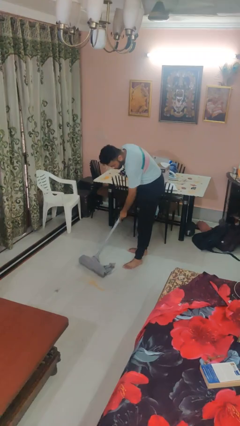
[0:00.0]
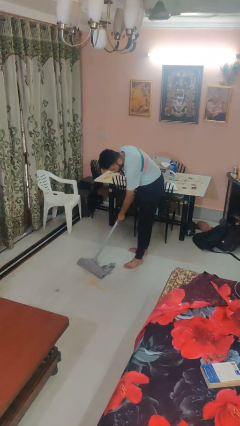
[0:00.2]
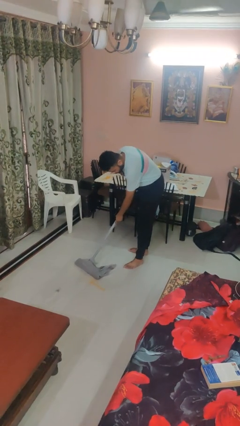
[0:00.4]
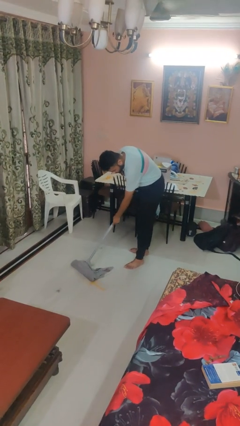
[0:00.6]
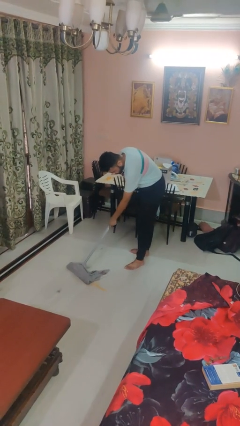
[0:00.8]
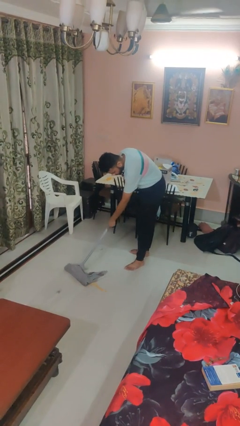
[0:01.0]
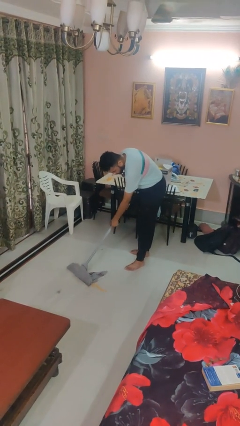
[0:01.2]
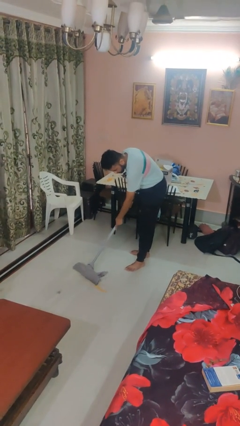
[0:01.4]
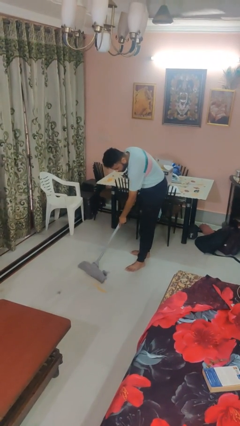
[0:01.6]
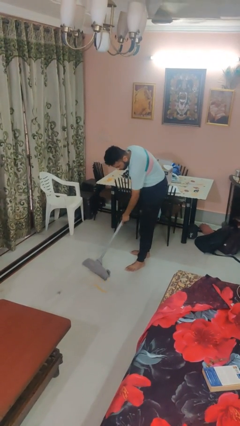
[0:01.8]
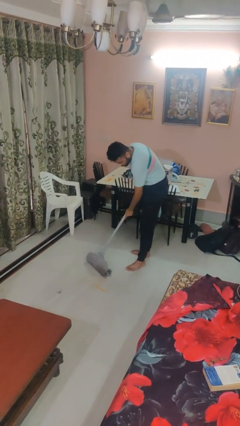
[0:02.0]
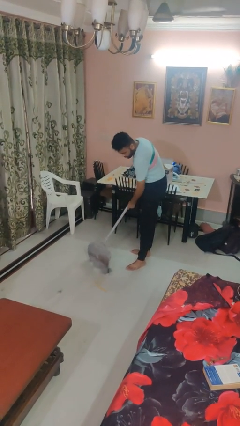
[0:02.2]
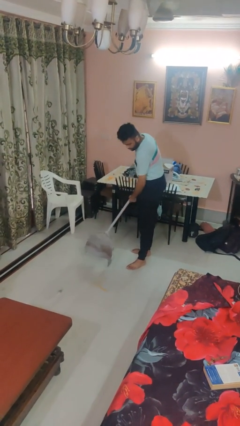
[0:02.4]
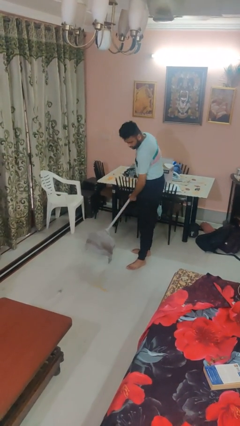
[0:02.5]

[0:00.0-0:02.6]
person mops

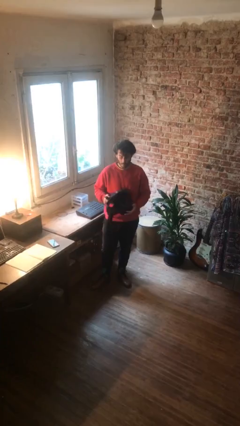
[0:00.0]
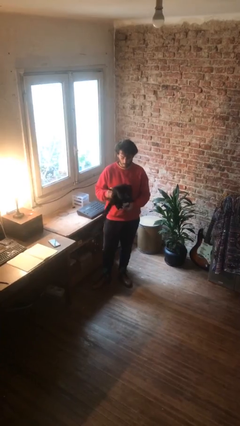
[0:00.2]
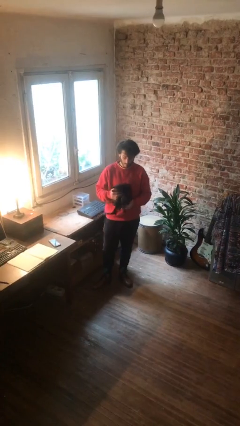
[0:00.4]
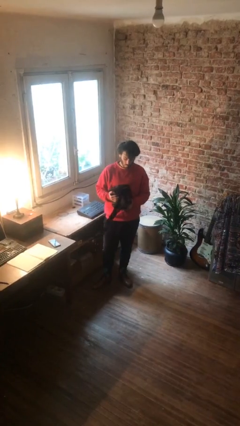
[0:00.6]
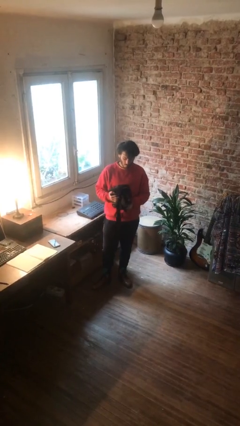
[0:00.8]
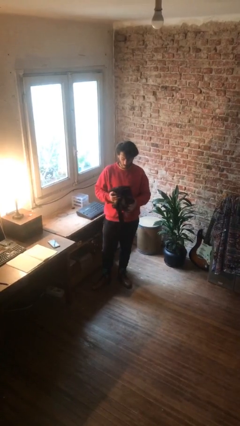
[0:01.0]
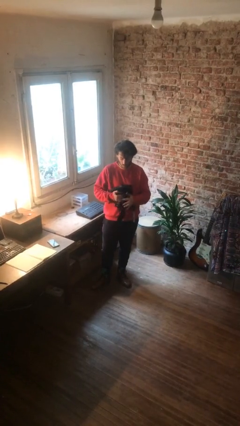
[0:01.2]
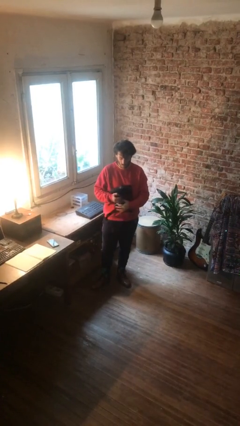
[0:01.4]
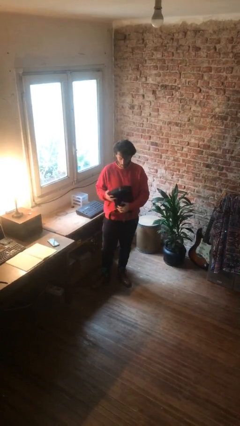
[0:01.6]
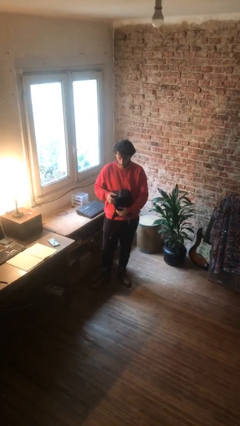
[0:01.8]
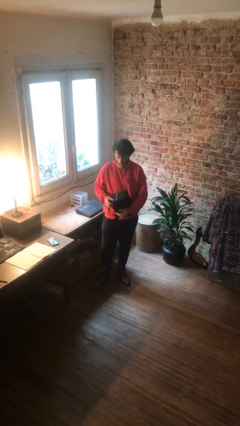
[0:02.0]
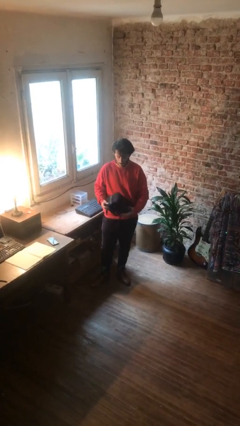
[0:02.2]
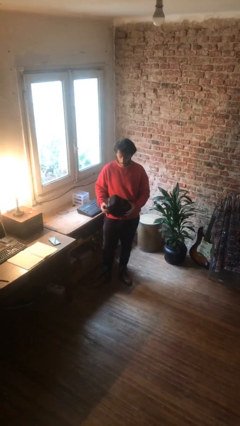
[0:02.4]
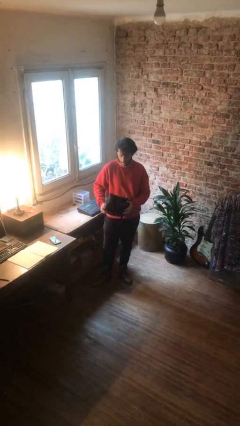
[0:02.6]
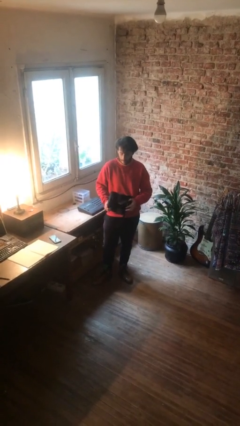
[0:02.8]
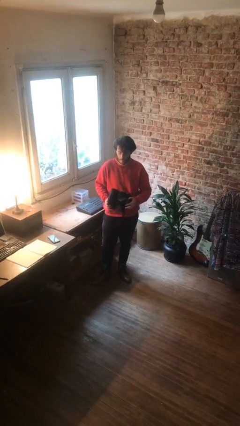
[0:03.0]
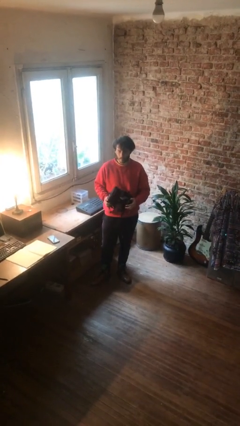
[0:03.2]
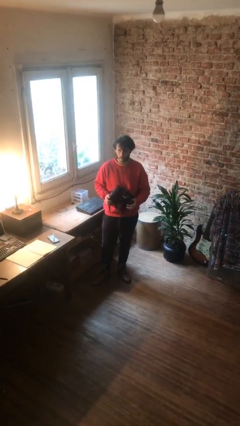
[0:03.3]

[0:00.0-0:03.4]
person squeezes object

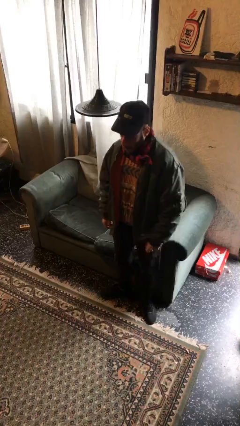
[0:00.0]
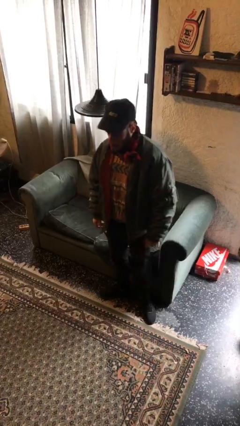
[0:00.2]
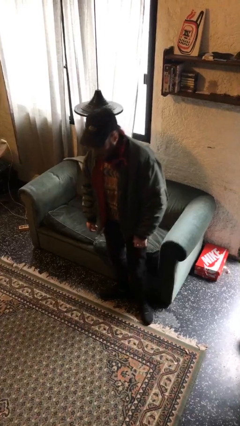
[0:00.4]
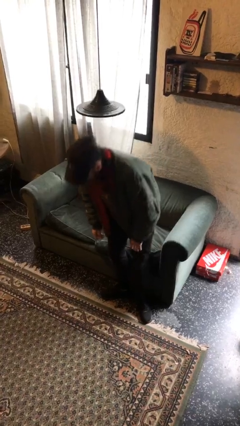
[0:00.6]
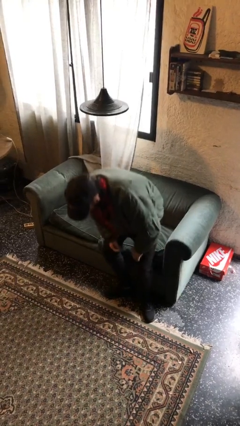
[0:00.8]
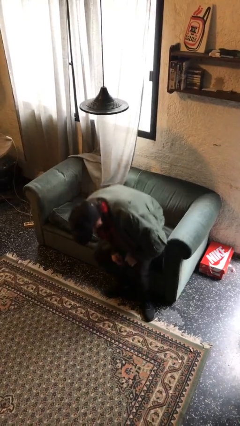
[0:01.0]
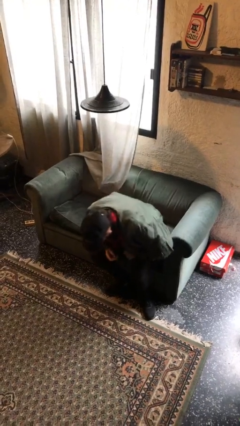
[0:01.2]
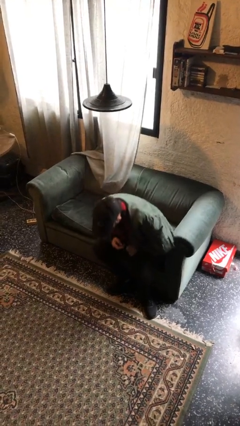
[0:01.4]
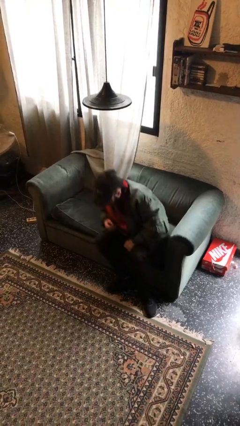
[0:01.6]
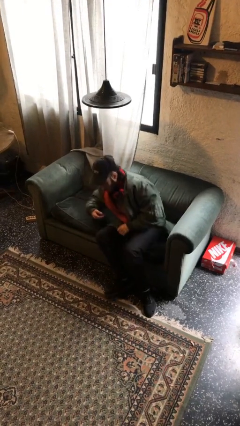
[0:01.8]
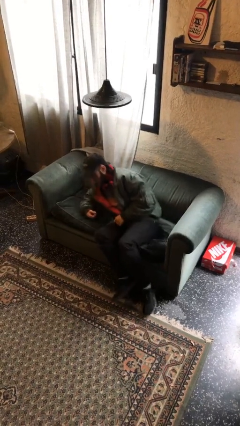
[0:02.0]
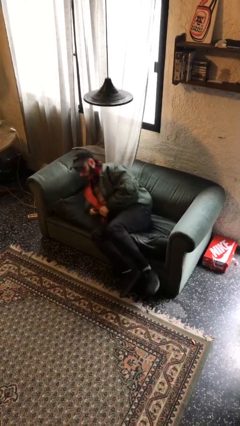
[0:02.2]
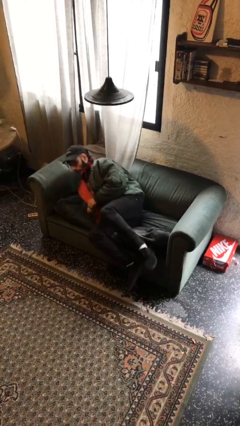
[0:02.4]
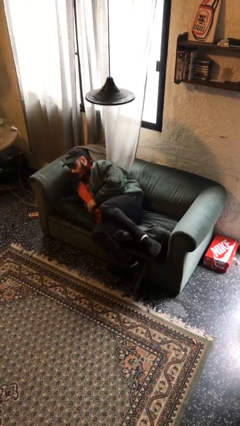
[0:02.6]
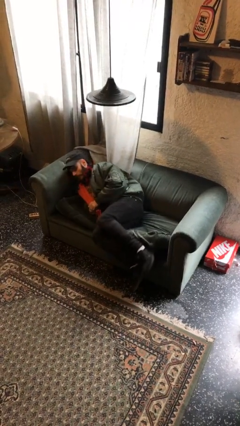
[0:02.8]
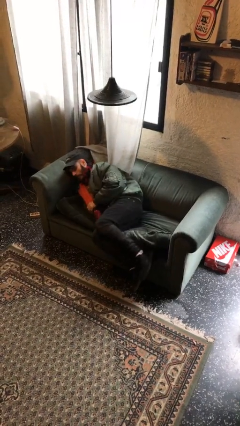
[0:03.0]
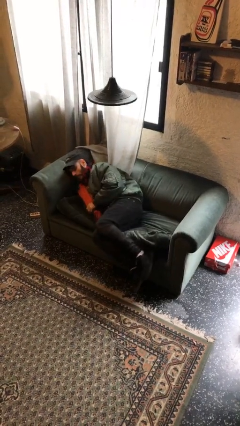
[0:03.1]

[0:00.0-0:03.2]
person lies down on couch

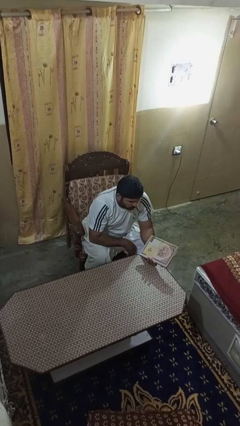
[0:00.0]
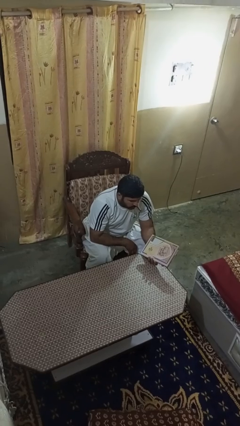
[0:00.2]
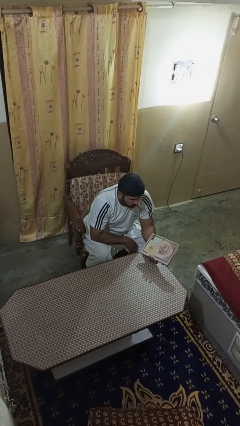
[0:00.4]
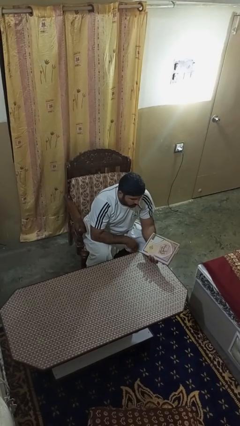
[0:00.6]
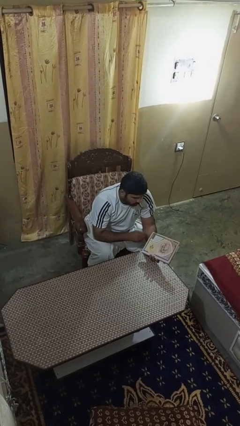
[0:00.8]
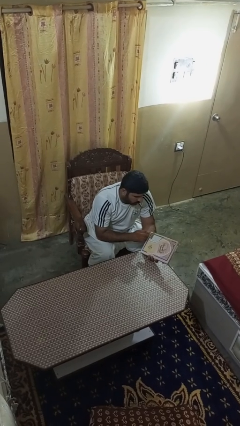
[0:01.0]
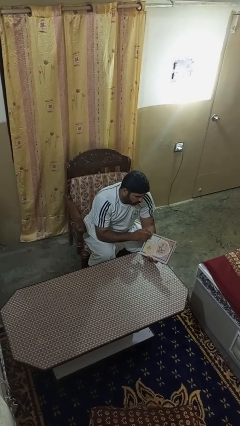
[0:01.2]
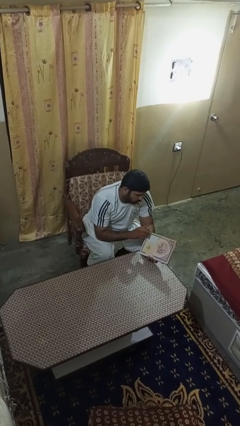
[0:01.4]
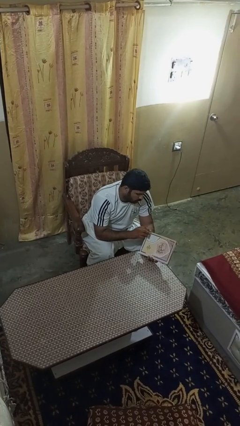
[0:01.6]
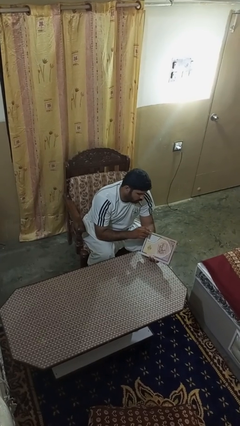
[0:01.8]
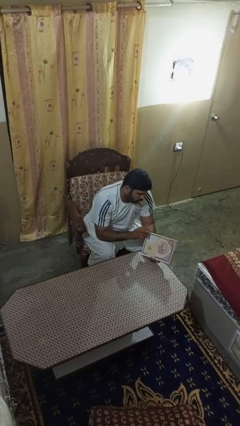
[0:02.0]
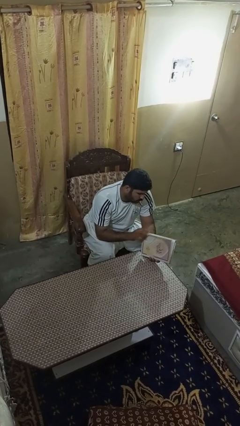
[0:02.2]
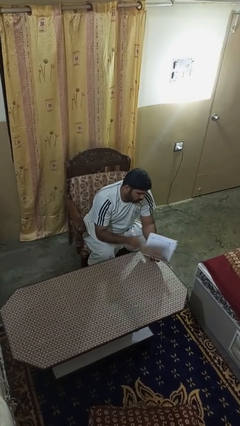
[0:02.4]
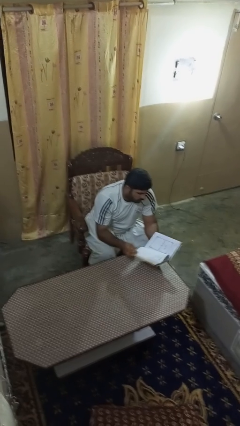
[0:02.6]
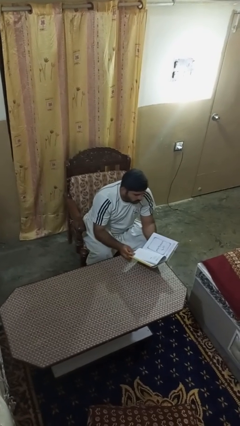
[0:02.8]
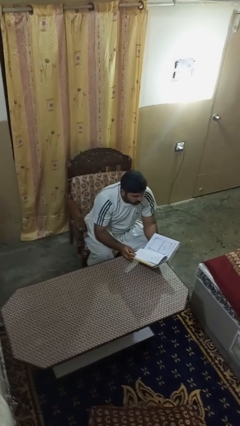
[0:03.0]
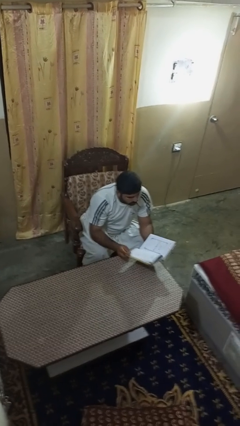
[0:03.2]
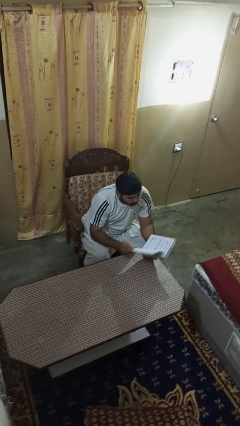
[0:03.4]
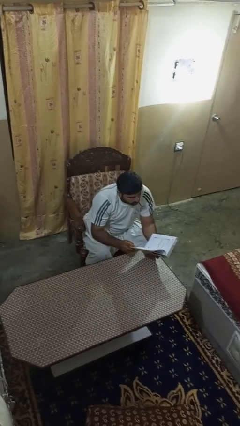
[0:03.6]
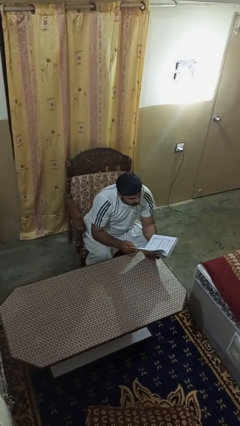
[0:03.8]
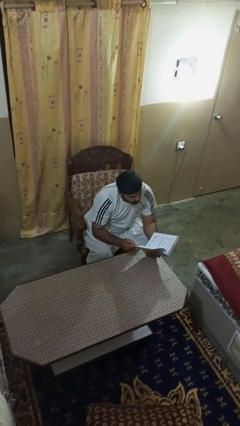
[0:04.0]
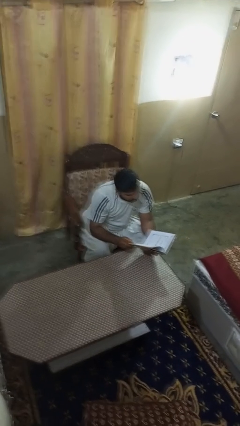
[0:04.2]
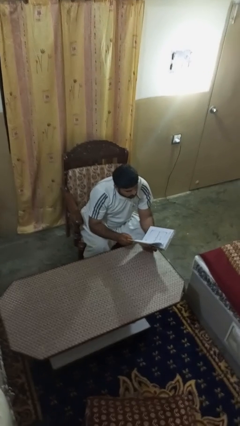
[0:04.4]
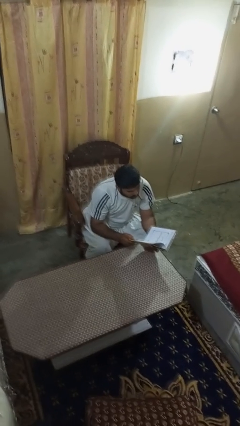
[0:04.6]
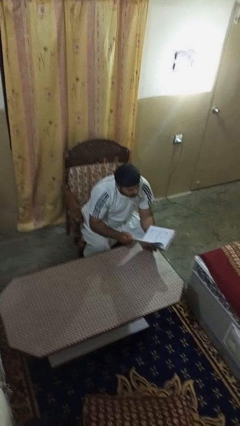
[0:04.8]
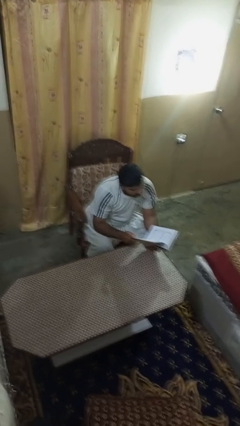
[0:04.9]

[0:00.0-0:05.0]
person reads book

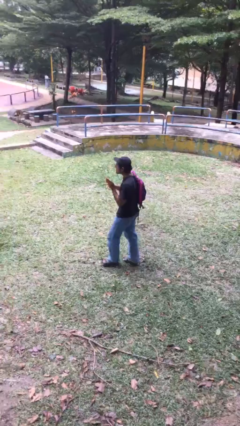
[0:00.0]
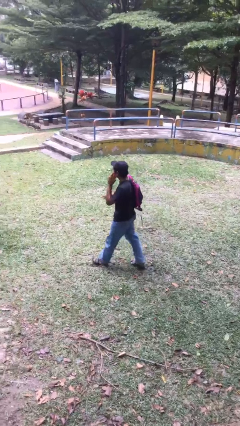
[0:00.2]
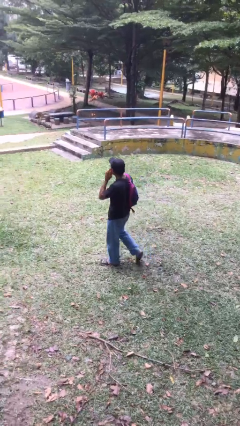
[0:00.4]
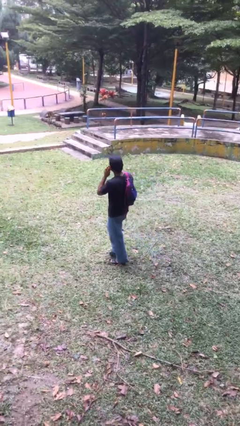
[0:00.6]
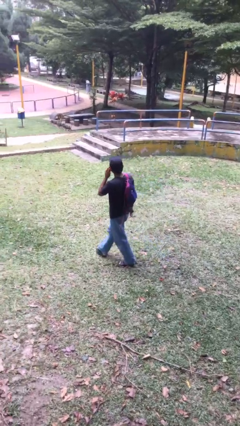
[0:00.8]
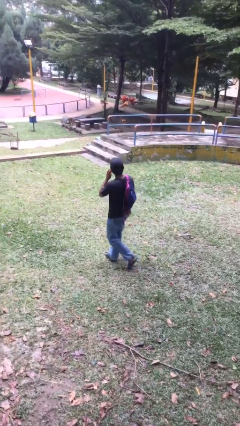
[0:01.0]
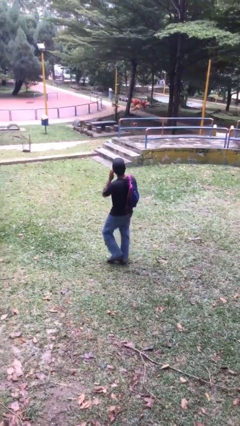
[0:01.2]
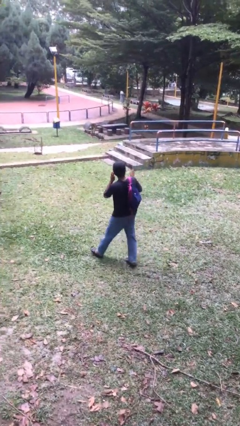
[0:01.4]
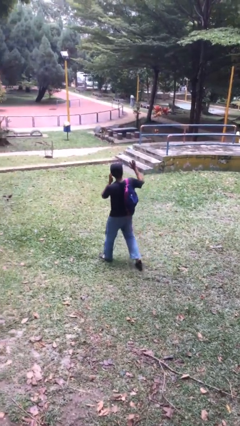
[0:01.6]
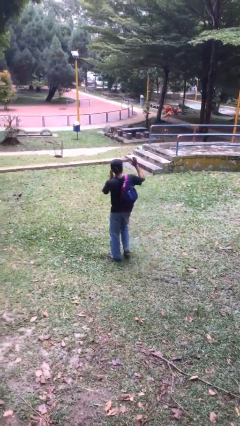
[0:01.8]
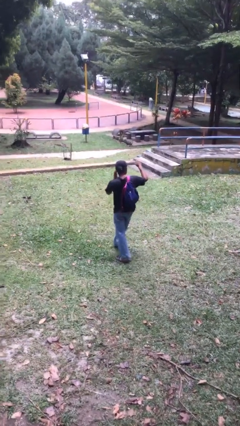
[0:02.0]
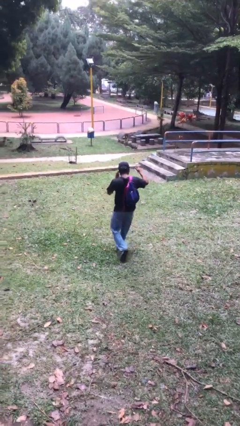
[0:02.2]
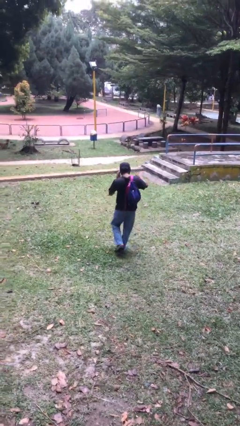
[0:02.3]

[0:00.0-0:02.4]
person talks on phone

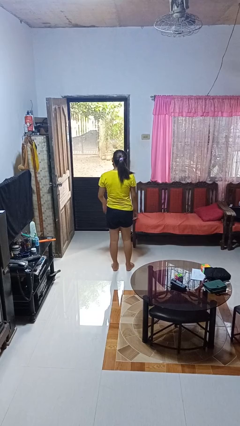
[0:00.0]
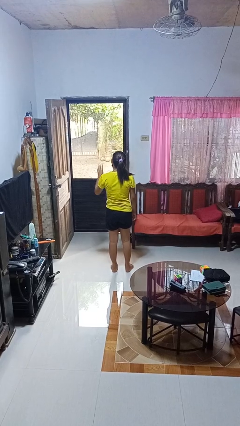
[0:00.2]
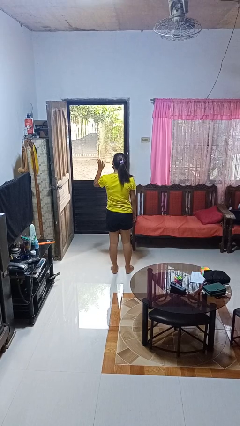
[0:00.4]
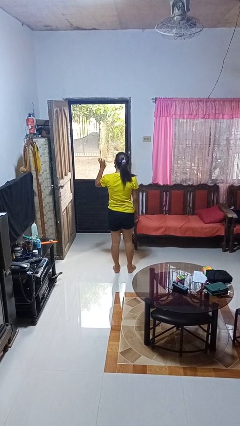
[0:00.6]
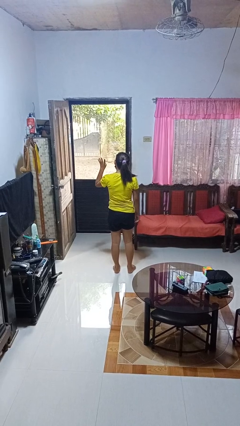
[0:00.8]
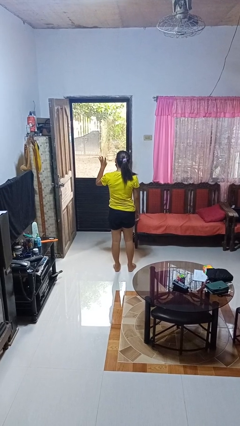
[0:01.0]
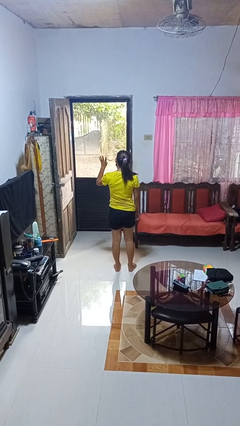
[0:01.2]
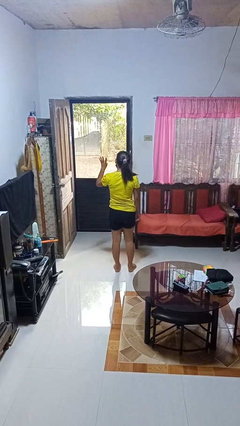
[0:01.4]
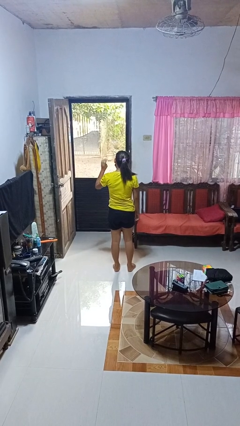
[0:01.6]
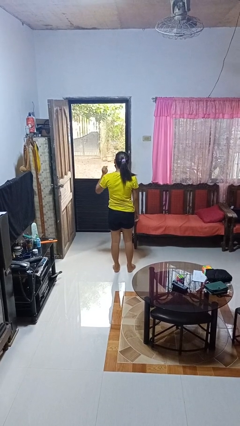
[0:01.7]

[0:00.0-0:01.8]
person gestures number four
